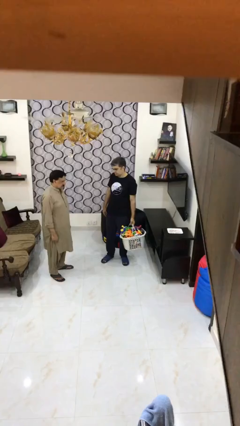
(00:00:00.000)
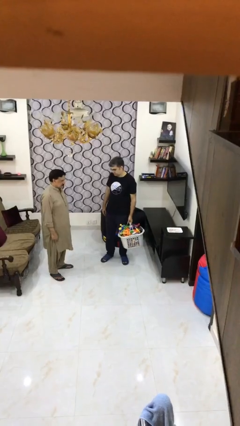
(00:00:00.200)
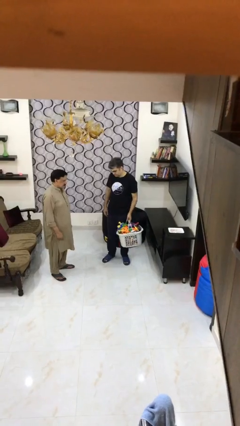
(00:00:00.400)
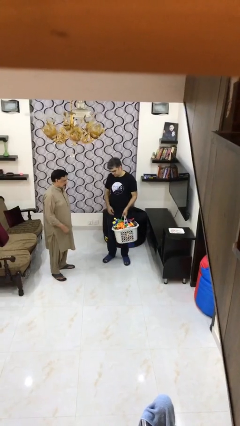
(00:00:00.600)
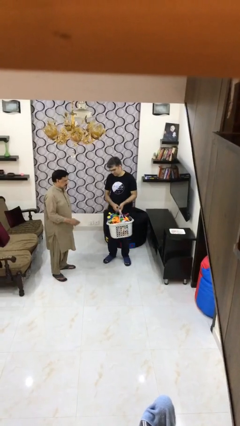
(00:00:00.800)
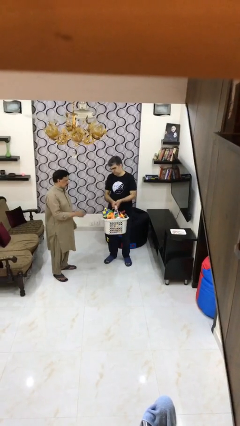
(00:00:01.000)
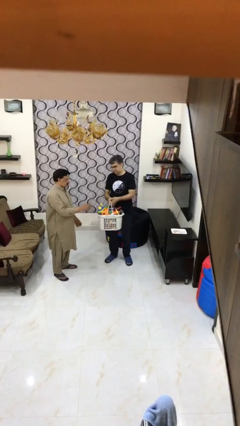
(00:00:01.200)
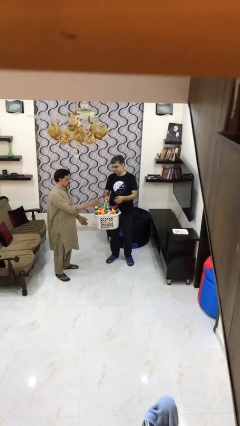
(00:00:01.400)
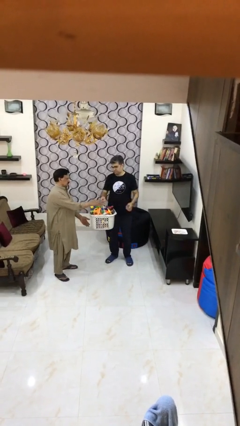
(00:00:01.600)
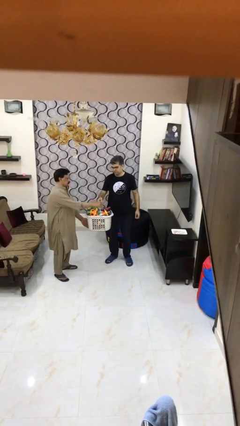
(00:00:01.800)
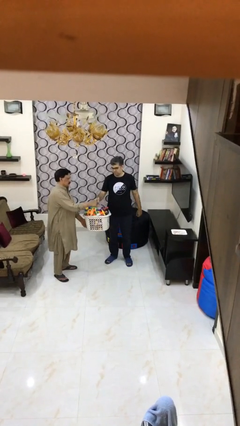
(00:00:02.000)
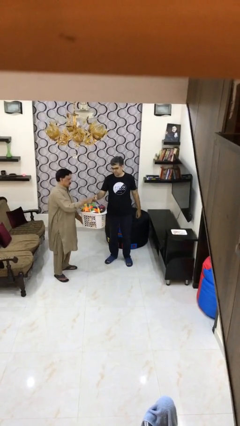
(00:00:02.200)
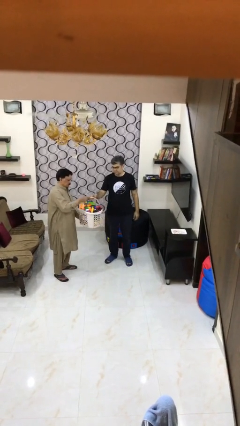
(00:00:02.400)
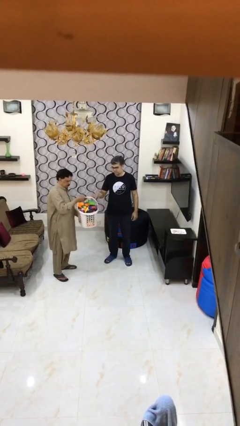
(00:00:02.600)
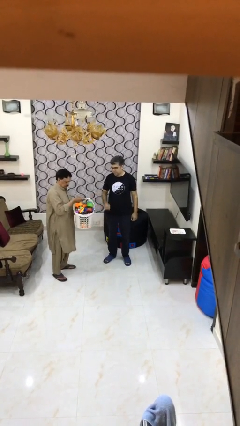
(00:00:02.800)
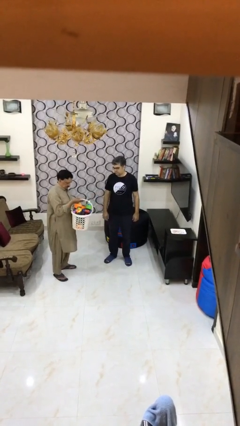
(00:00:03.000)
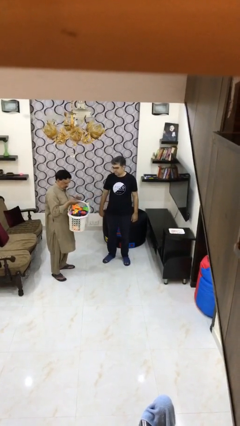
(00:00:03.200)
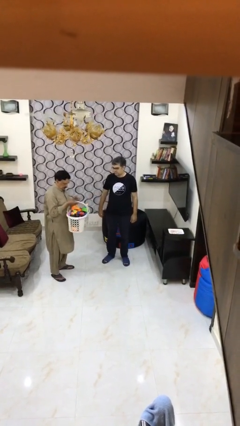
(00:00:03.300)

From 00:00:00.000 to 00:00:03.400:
person transfers object to person

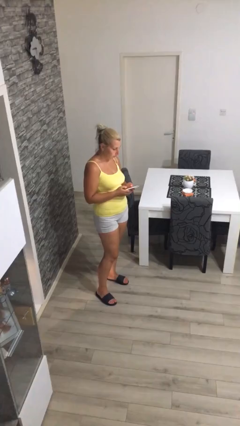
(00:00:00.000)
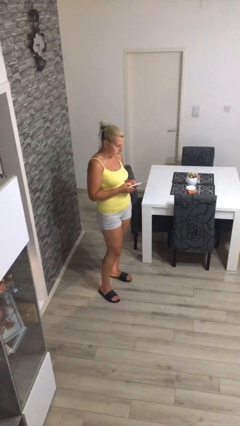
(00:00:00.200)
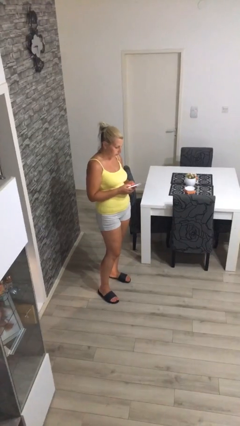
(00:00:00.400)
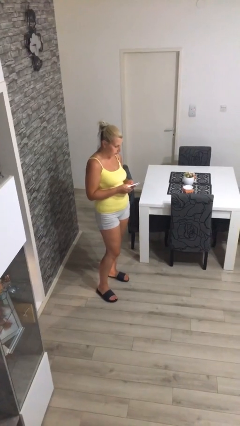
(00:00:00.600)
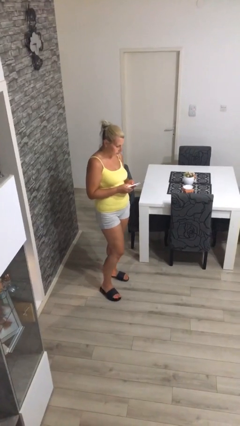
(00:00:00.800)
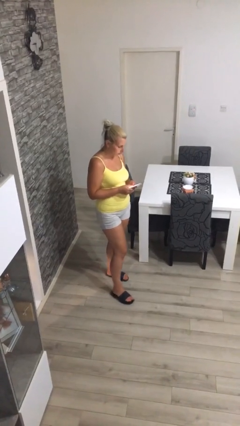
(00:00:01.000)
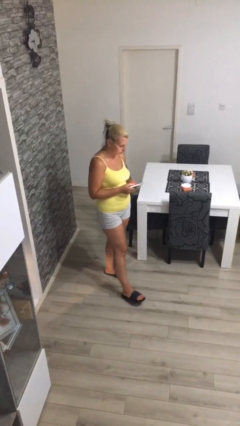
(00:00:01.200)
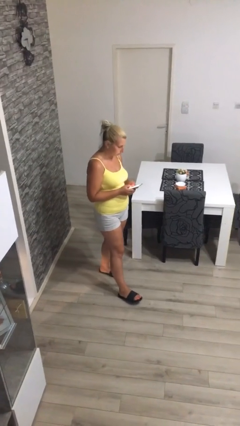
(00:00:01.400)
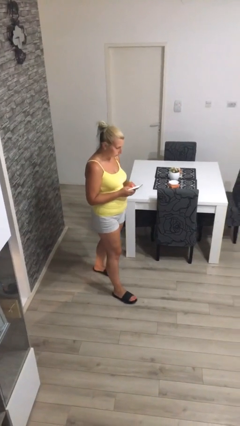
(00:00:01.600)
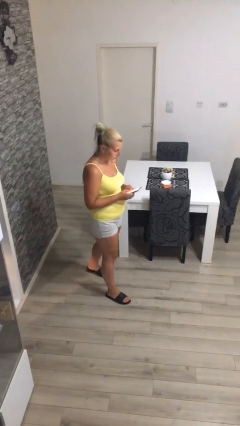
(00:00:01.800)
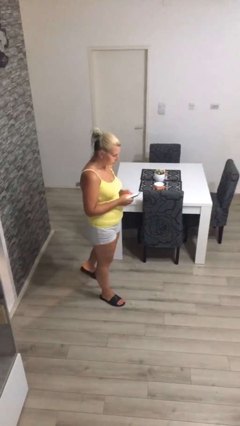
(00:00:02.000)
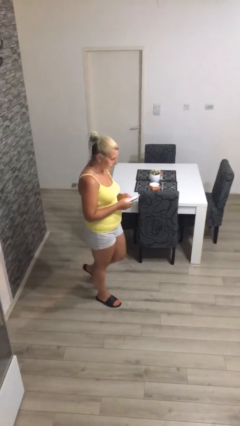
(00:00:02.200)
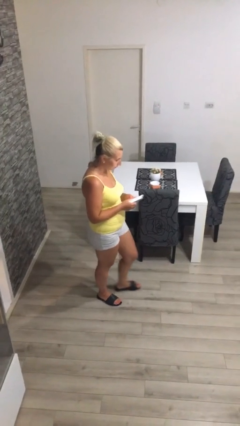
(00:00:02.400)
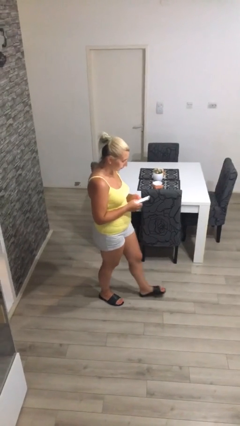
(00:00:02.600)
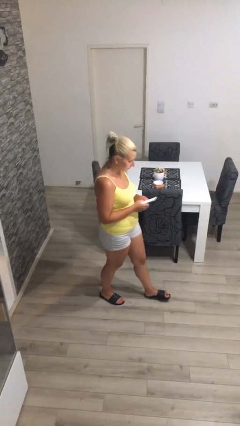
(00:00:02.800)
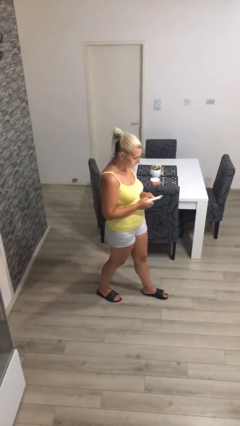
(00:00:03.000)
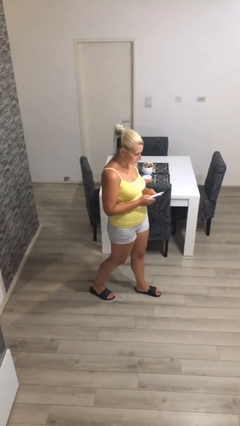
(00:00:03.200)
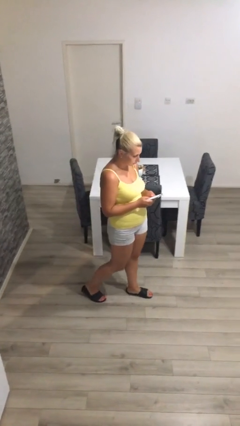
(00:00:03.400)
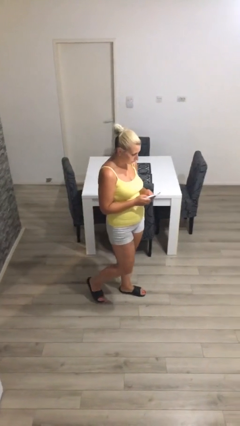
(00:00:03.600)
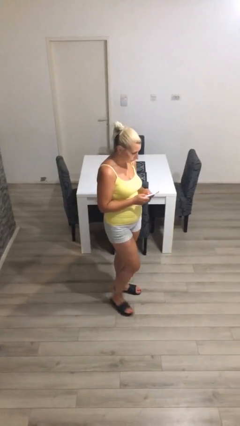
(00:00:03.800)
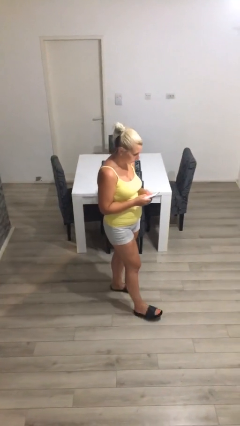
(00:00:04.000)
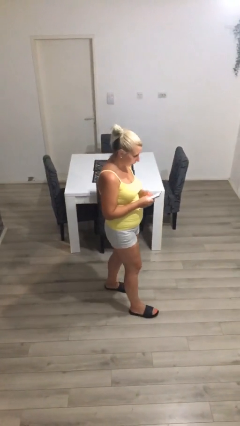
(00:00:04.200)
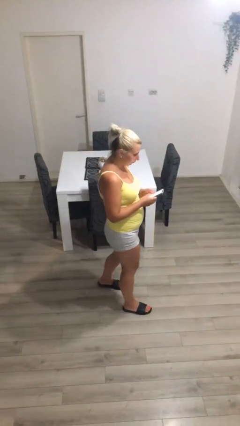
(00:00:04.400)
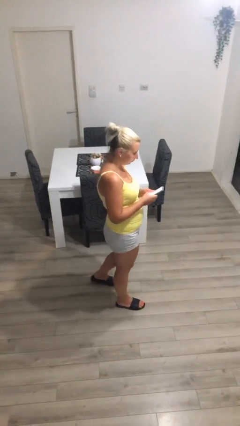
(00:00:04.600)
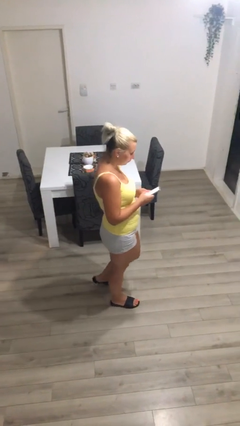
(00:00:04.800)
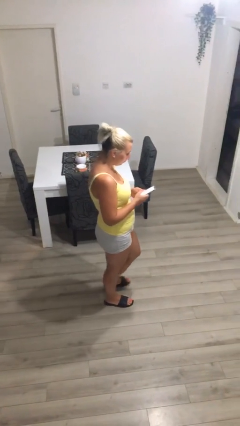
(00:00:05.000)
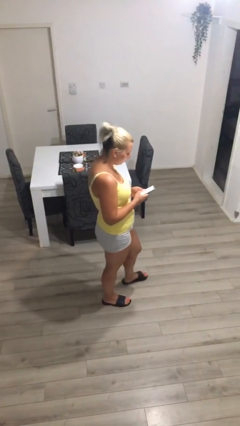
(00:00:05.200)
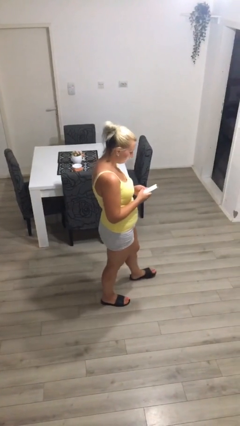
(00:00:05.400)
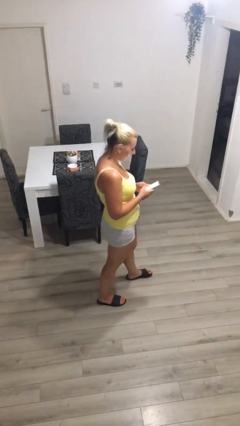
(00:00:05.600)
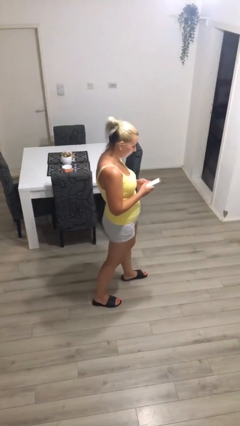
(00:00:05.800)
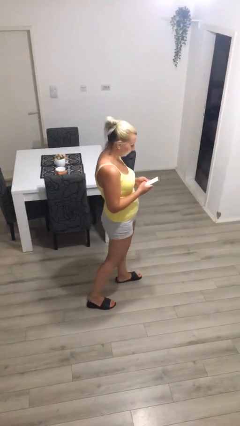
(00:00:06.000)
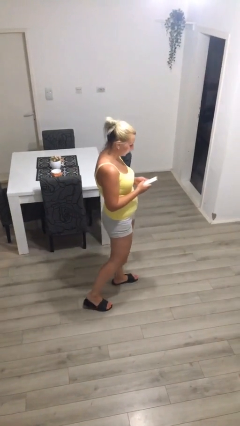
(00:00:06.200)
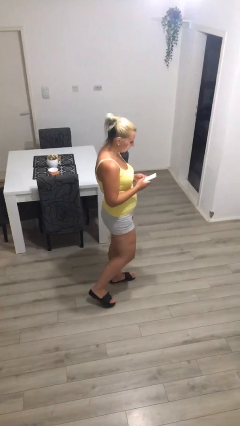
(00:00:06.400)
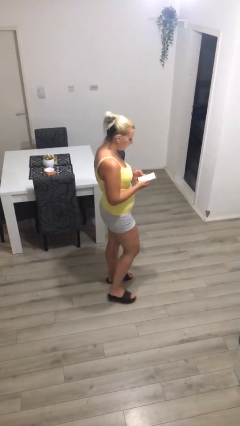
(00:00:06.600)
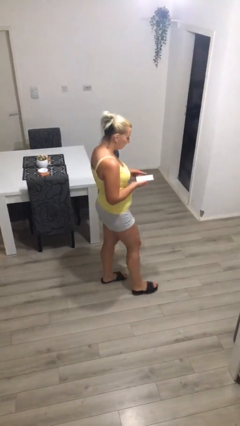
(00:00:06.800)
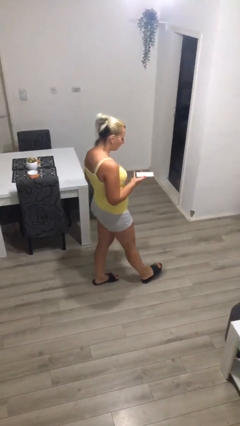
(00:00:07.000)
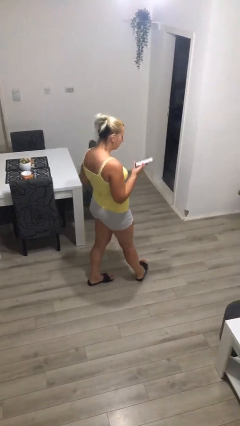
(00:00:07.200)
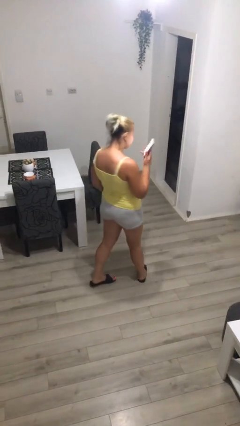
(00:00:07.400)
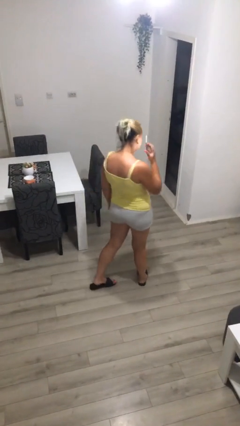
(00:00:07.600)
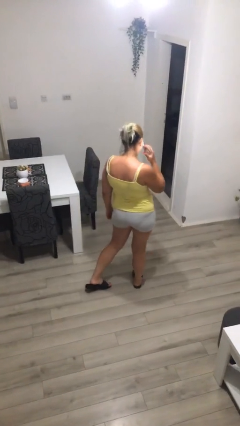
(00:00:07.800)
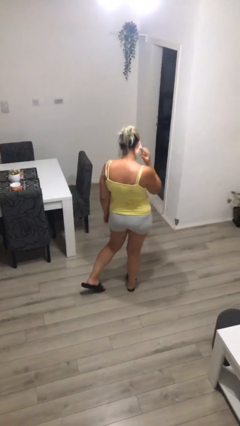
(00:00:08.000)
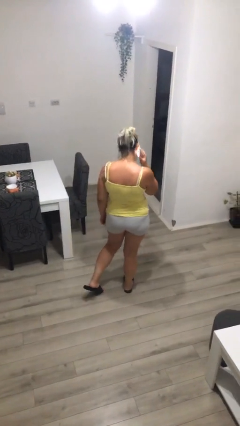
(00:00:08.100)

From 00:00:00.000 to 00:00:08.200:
person texts on phone

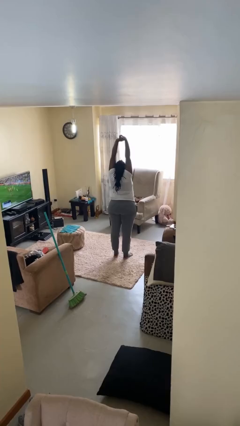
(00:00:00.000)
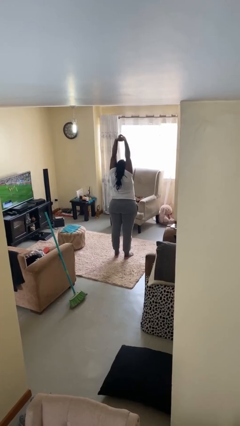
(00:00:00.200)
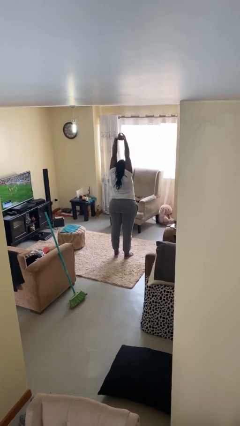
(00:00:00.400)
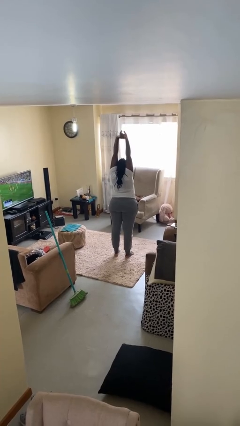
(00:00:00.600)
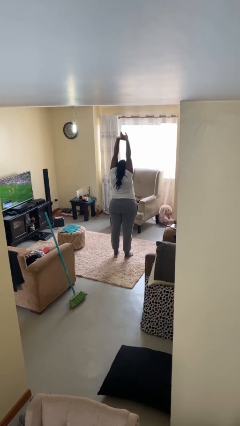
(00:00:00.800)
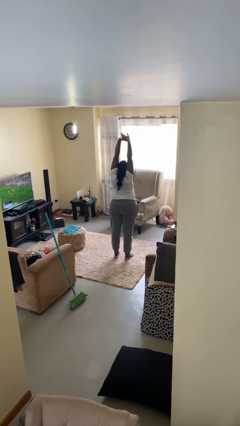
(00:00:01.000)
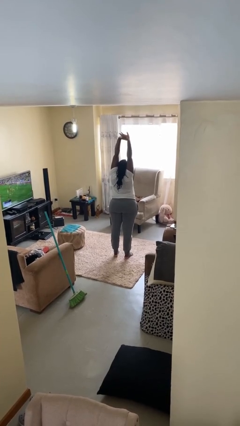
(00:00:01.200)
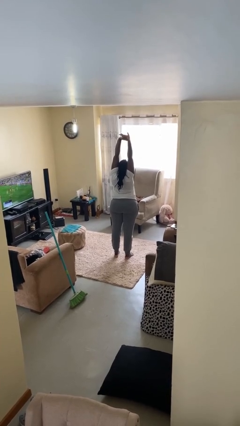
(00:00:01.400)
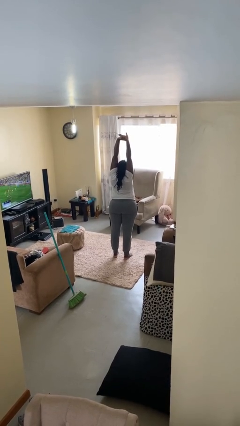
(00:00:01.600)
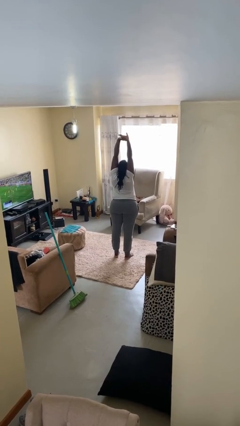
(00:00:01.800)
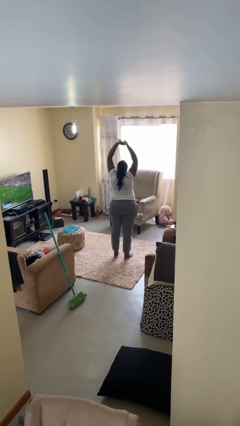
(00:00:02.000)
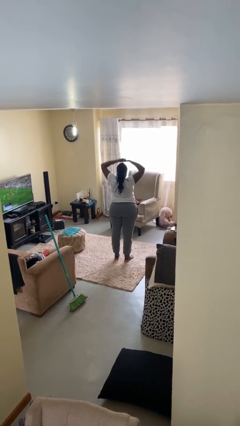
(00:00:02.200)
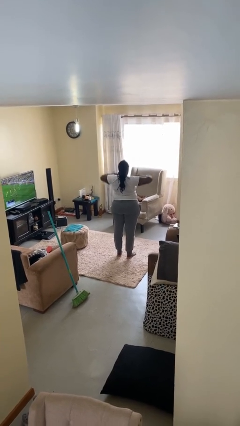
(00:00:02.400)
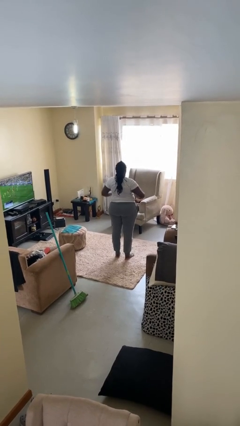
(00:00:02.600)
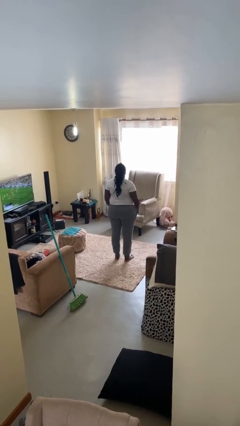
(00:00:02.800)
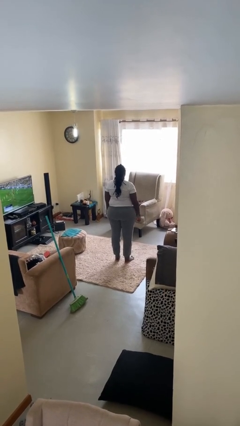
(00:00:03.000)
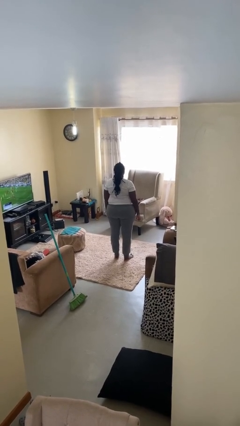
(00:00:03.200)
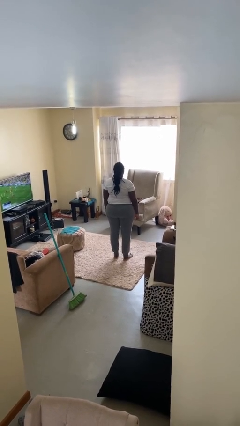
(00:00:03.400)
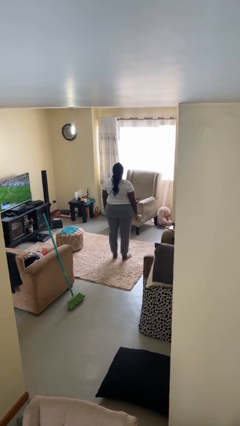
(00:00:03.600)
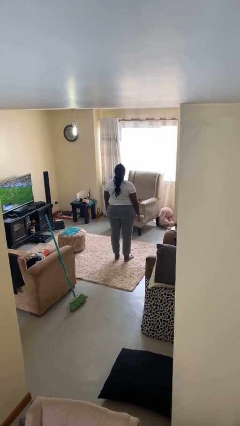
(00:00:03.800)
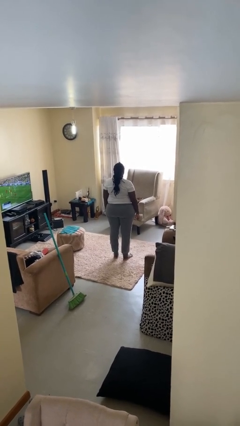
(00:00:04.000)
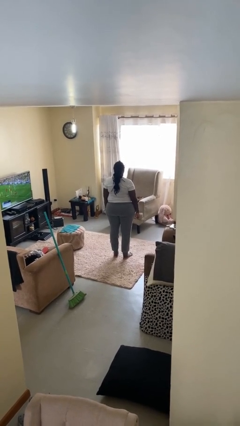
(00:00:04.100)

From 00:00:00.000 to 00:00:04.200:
person stretches arms over head

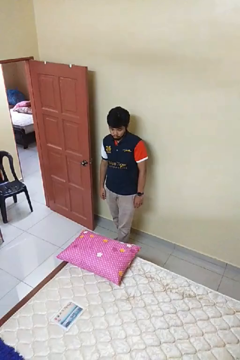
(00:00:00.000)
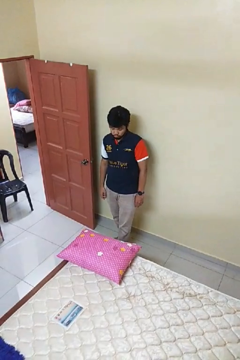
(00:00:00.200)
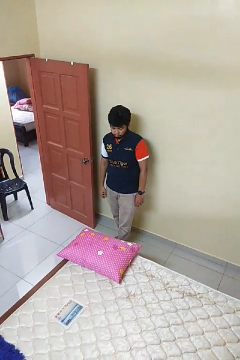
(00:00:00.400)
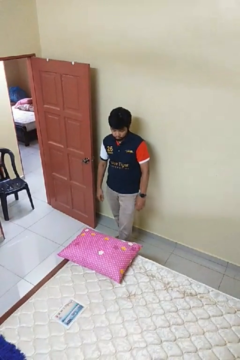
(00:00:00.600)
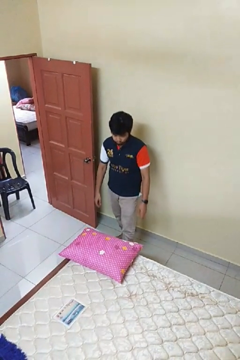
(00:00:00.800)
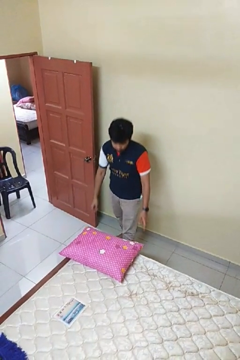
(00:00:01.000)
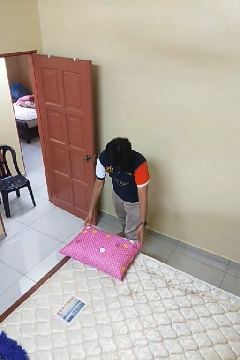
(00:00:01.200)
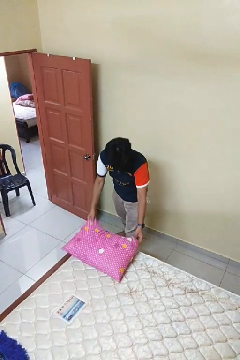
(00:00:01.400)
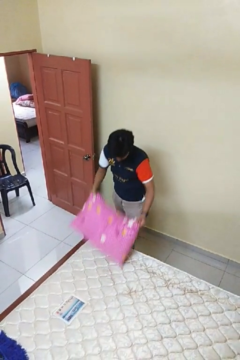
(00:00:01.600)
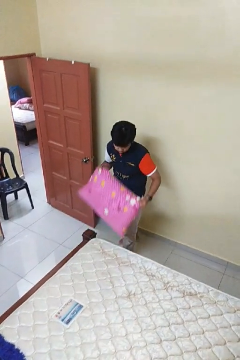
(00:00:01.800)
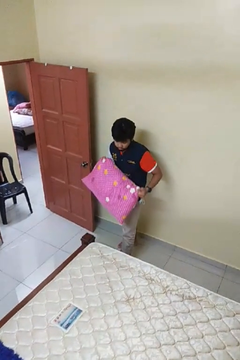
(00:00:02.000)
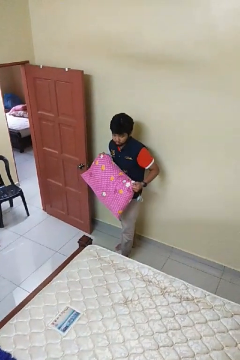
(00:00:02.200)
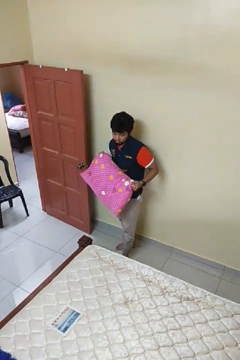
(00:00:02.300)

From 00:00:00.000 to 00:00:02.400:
person picks up object from bed
